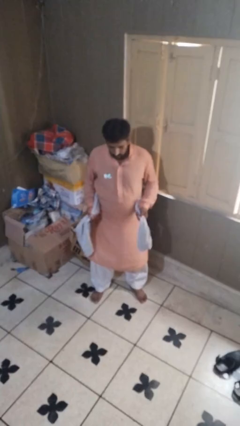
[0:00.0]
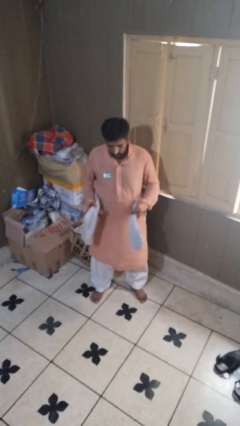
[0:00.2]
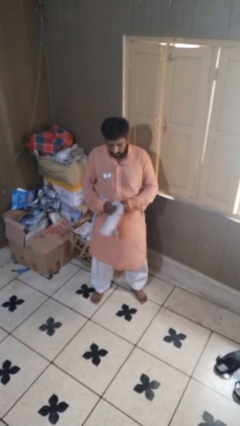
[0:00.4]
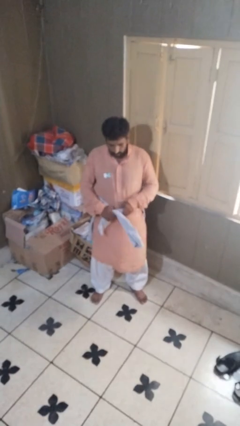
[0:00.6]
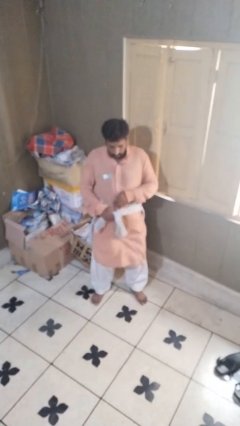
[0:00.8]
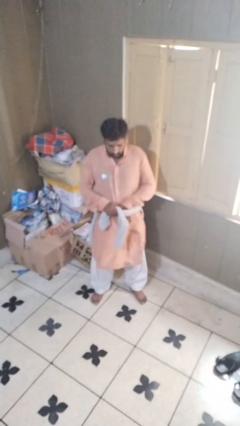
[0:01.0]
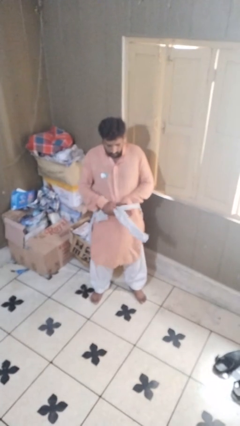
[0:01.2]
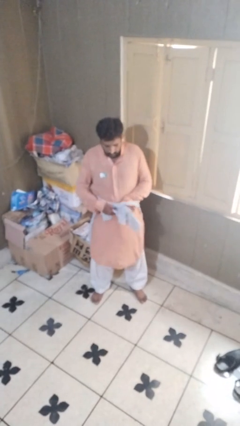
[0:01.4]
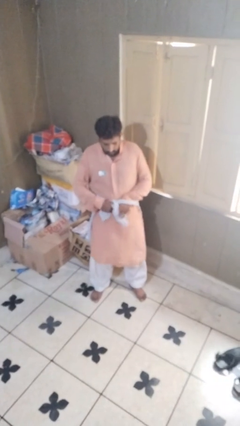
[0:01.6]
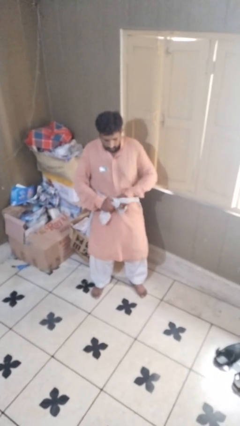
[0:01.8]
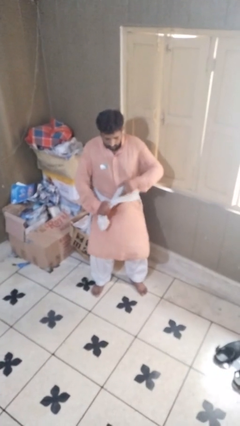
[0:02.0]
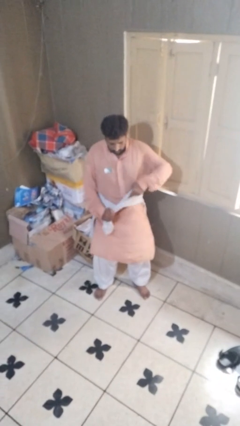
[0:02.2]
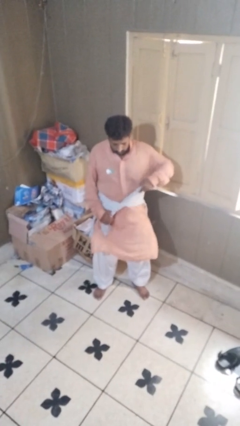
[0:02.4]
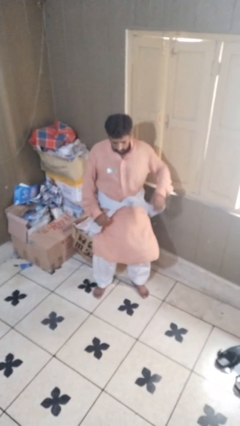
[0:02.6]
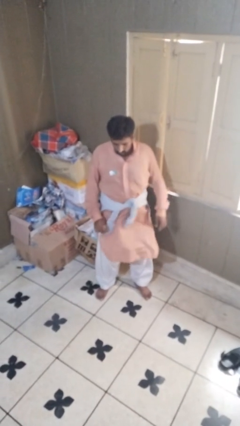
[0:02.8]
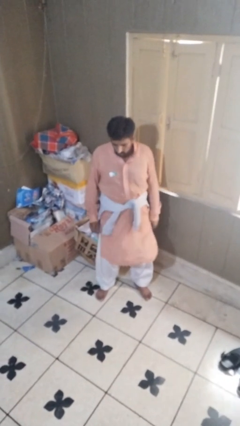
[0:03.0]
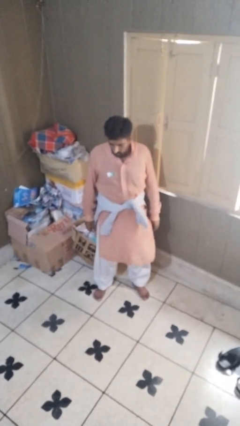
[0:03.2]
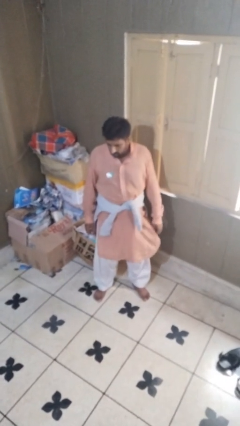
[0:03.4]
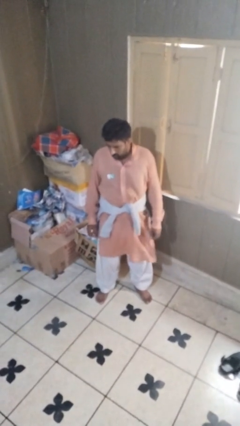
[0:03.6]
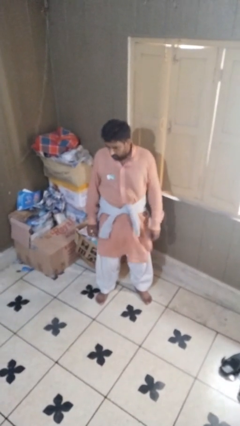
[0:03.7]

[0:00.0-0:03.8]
person ties jacket around waist

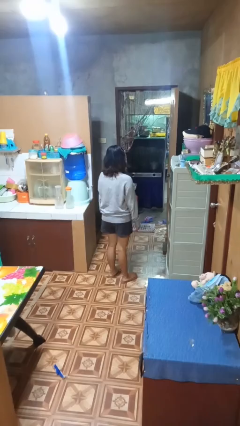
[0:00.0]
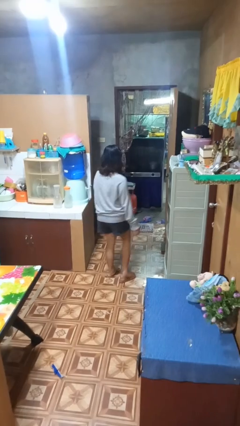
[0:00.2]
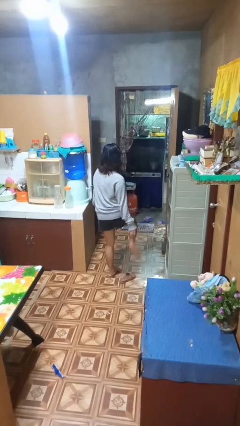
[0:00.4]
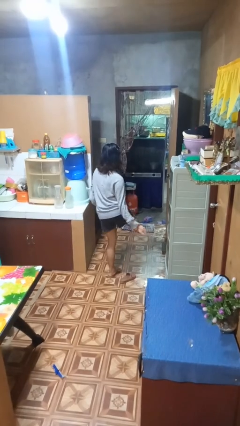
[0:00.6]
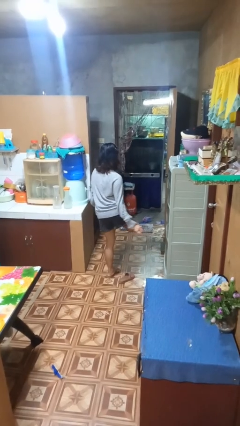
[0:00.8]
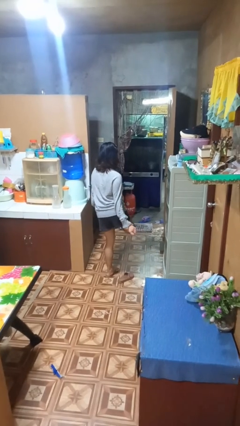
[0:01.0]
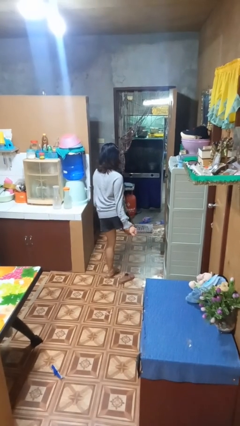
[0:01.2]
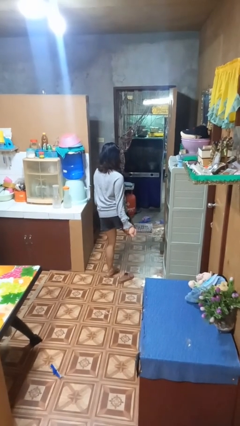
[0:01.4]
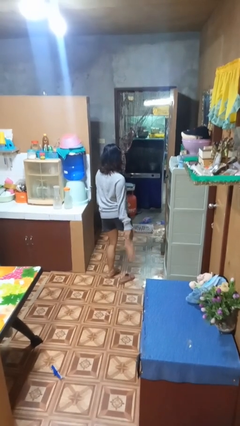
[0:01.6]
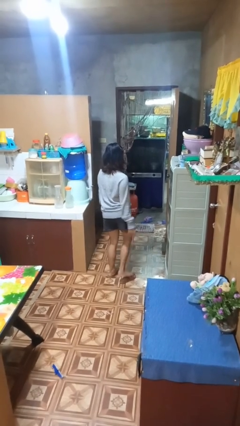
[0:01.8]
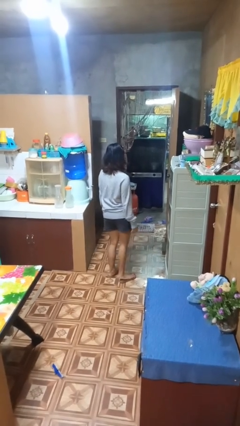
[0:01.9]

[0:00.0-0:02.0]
person rubs foot

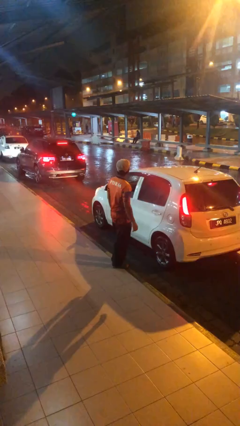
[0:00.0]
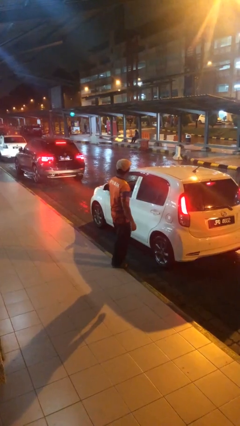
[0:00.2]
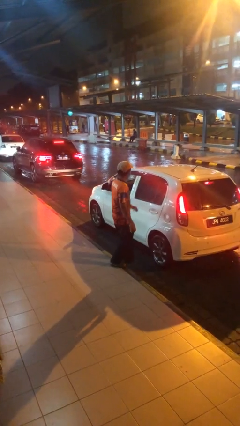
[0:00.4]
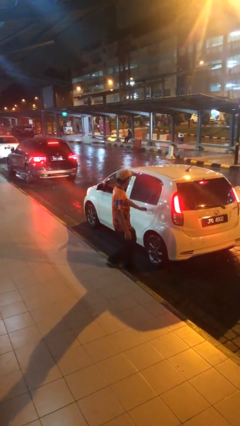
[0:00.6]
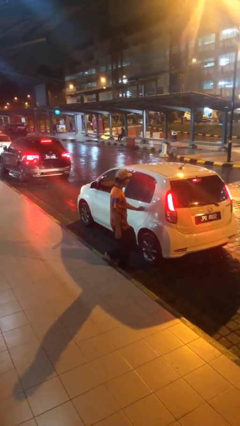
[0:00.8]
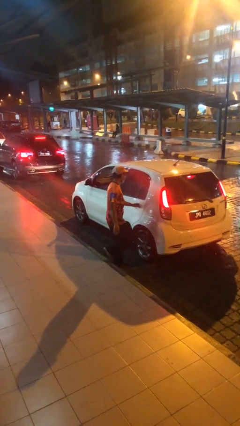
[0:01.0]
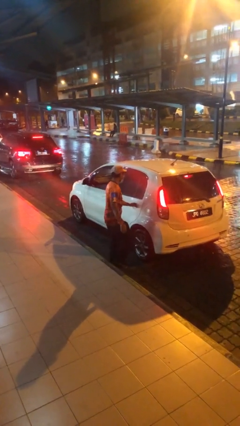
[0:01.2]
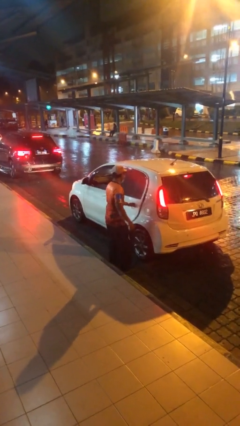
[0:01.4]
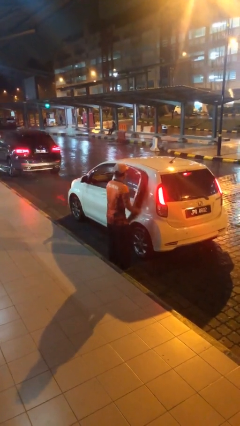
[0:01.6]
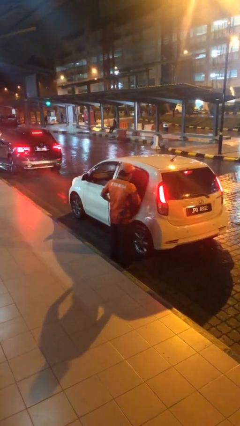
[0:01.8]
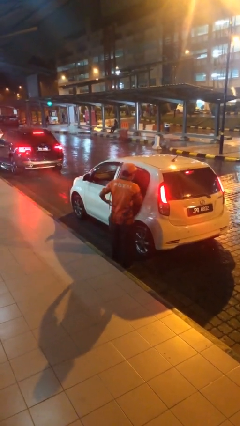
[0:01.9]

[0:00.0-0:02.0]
person opens car door

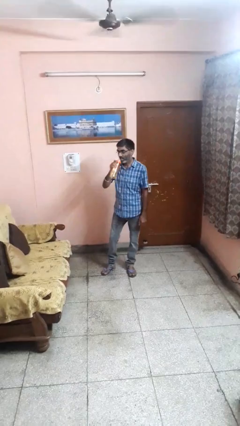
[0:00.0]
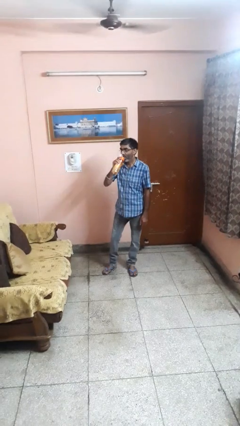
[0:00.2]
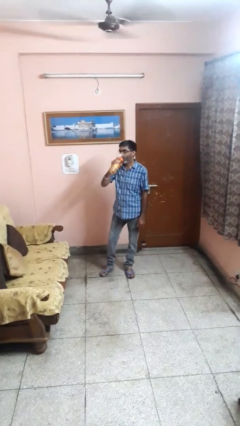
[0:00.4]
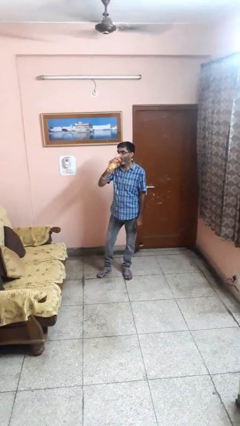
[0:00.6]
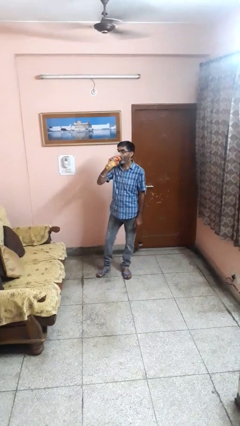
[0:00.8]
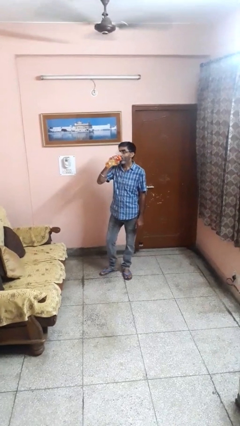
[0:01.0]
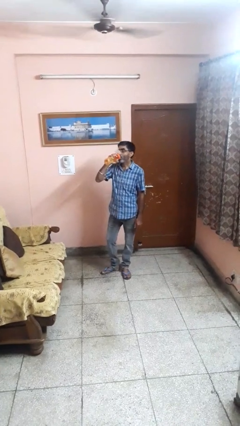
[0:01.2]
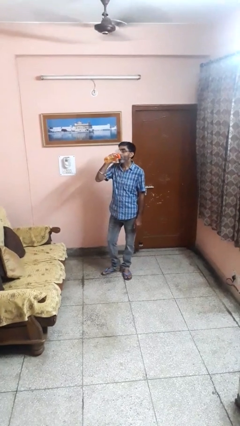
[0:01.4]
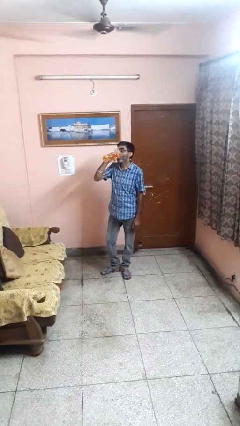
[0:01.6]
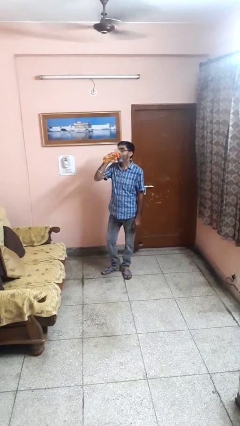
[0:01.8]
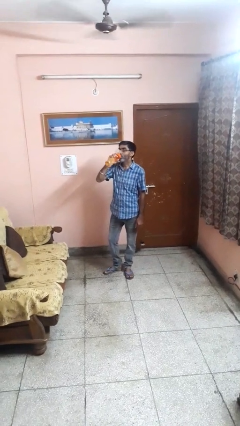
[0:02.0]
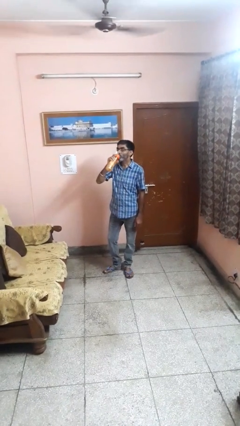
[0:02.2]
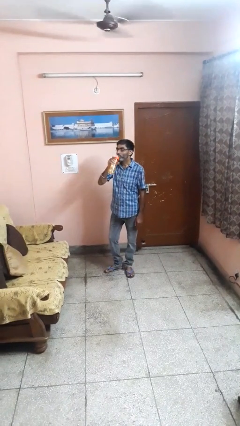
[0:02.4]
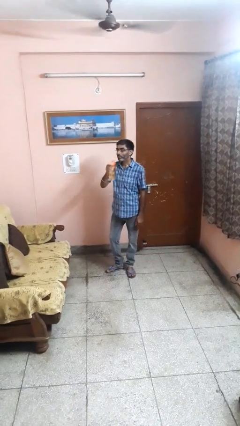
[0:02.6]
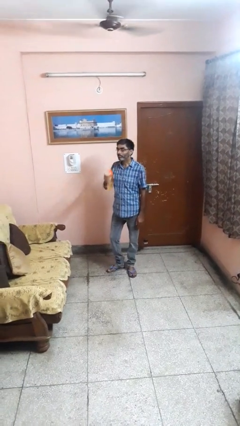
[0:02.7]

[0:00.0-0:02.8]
person drinks from bottle

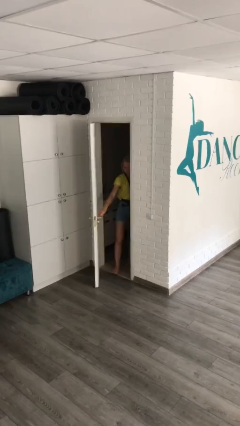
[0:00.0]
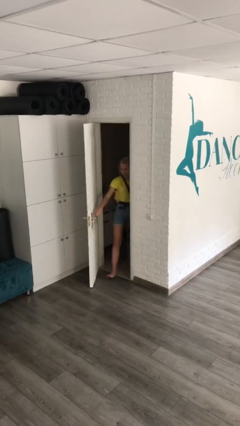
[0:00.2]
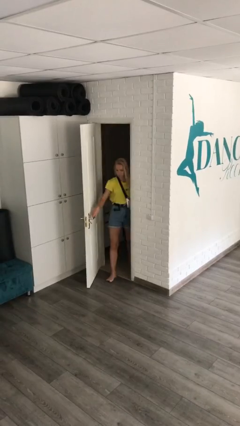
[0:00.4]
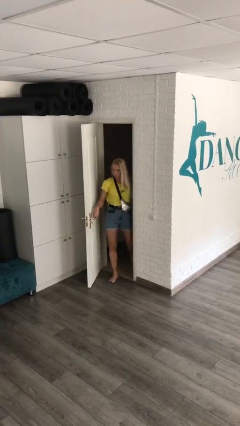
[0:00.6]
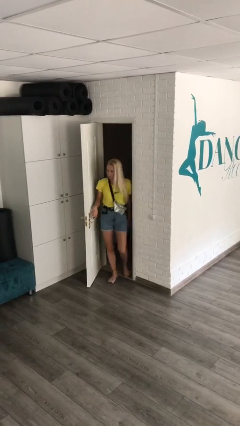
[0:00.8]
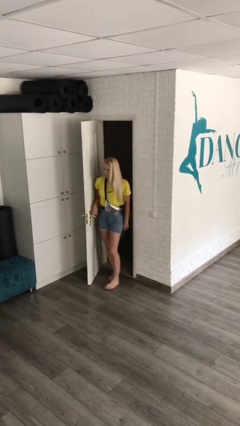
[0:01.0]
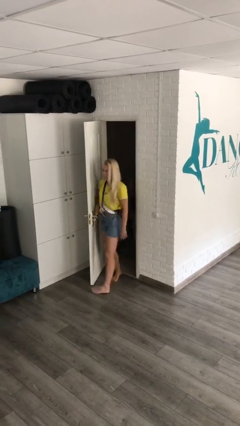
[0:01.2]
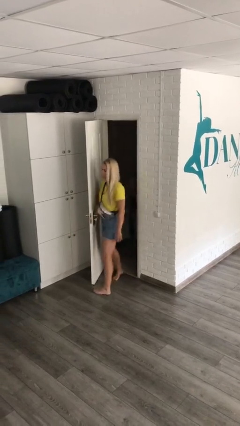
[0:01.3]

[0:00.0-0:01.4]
person enters scene through structure

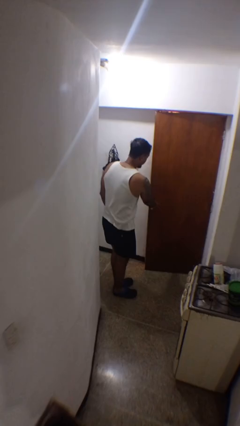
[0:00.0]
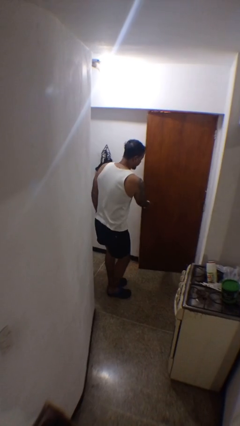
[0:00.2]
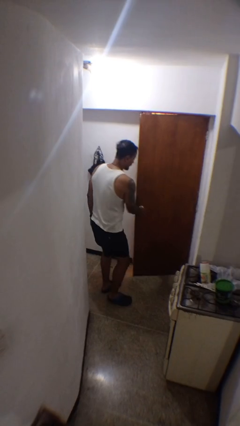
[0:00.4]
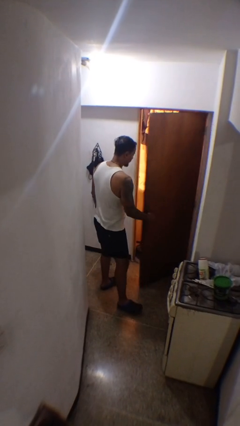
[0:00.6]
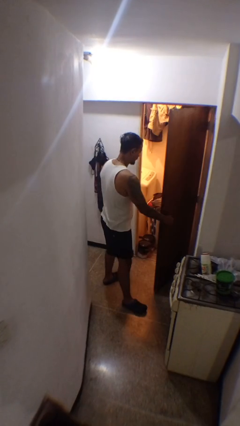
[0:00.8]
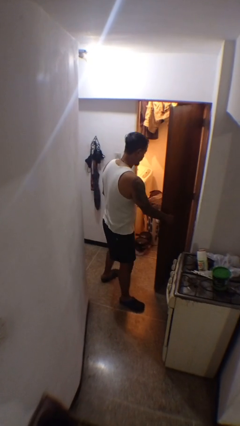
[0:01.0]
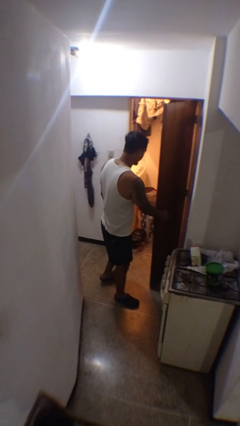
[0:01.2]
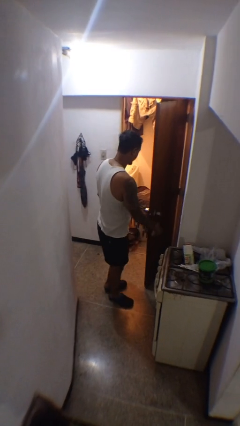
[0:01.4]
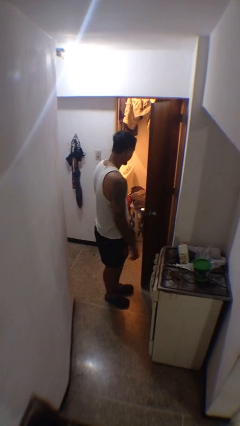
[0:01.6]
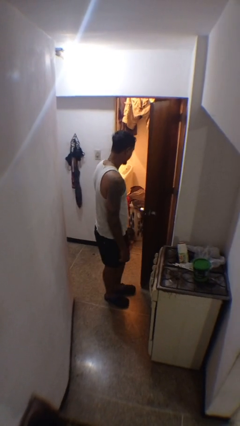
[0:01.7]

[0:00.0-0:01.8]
person opens facility door

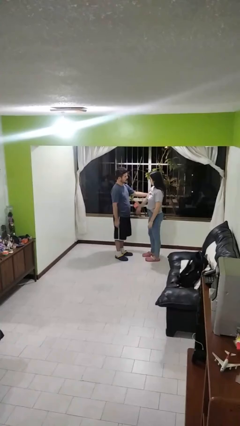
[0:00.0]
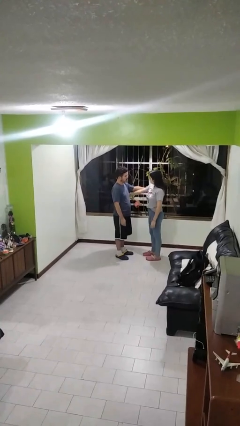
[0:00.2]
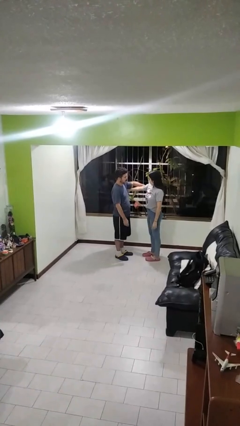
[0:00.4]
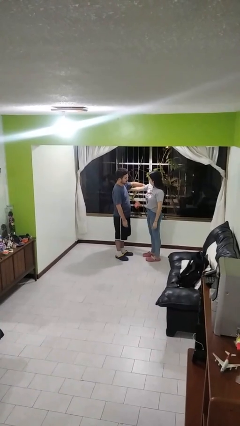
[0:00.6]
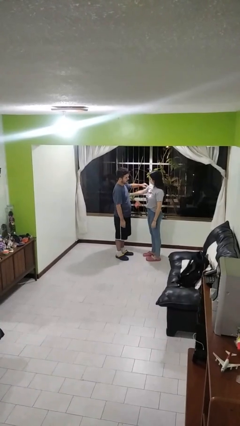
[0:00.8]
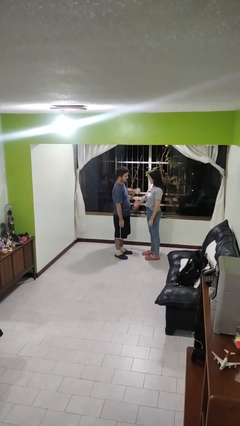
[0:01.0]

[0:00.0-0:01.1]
person grabs person by bicep

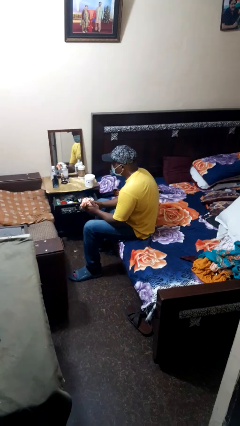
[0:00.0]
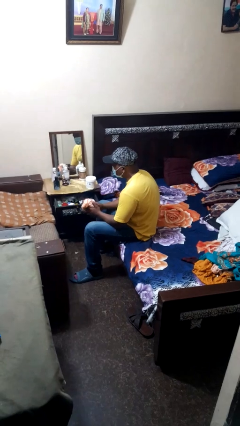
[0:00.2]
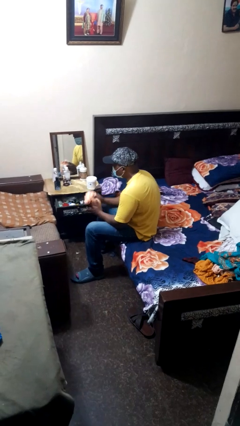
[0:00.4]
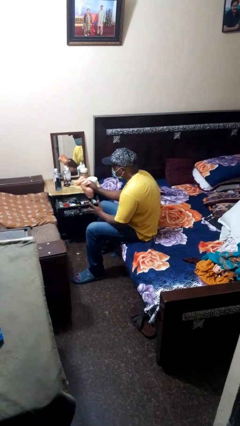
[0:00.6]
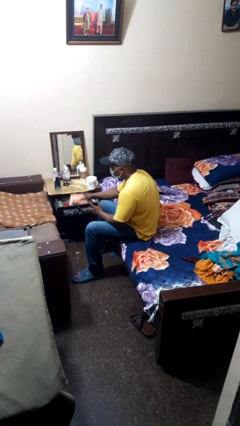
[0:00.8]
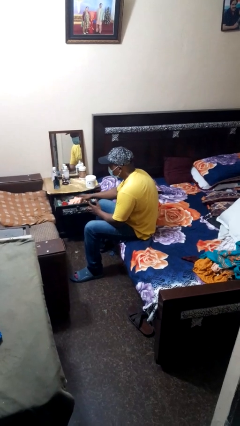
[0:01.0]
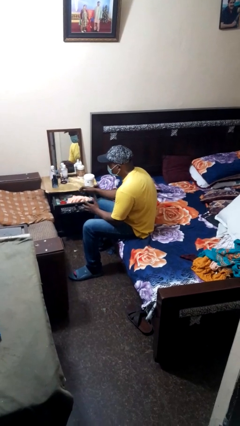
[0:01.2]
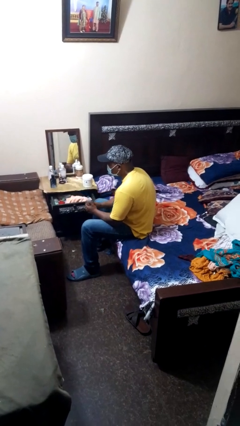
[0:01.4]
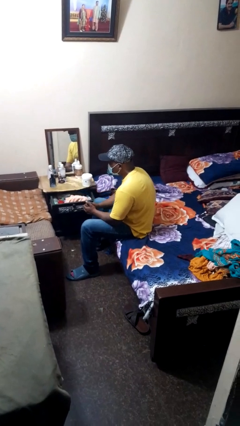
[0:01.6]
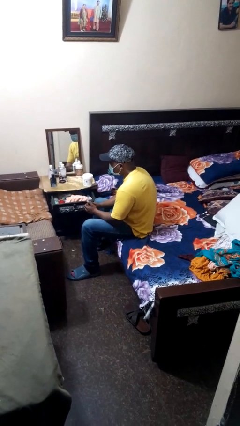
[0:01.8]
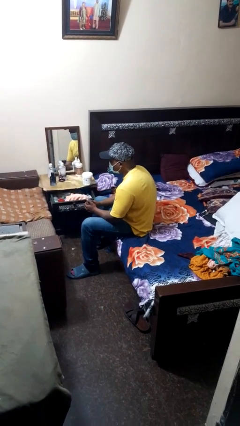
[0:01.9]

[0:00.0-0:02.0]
person puts clothes into dresser
